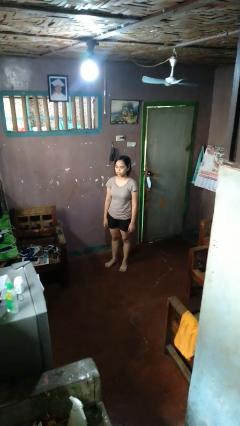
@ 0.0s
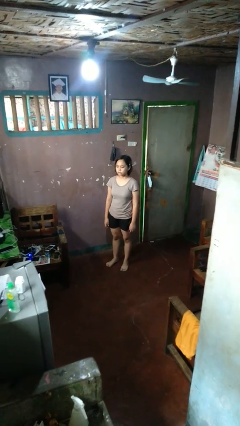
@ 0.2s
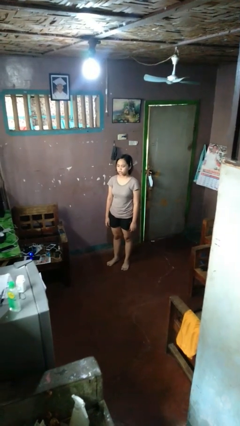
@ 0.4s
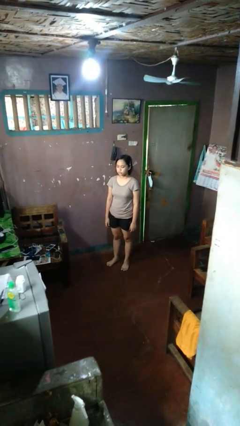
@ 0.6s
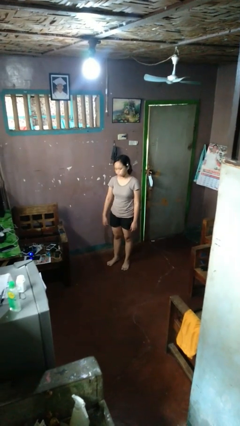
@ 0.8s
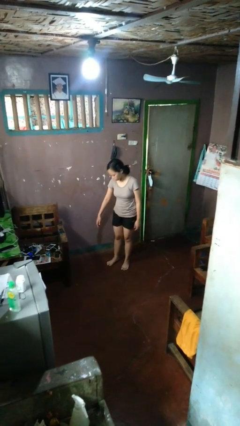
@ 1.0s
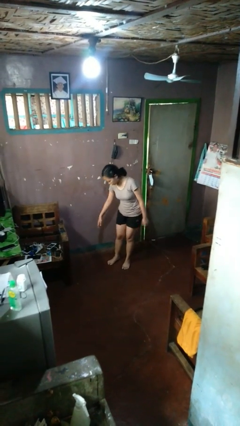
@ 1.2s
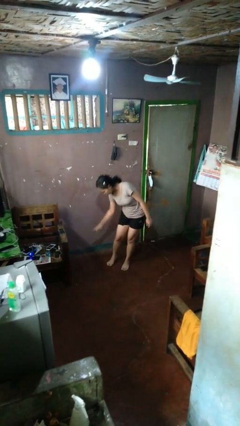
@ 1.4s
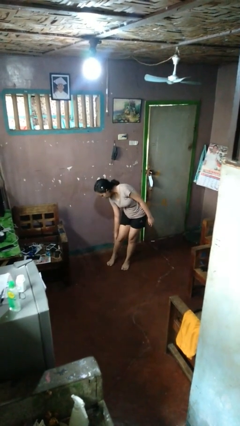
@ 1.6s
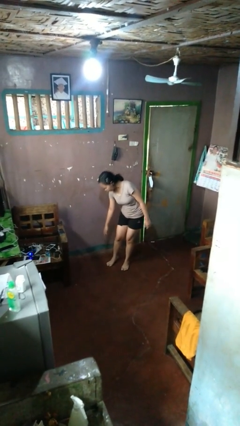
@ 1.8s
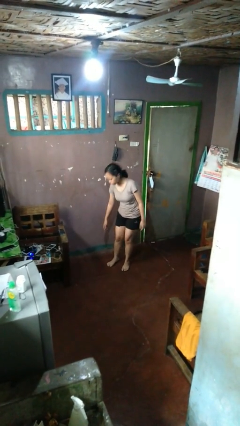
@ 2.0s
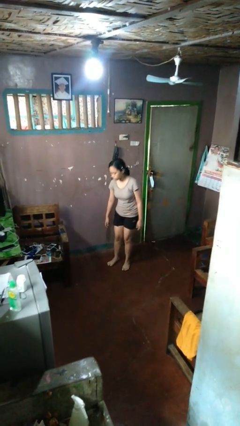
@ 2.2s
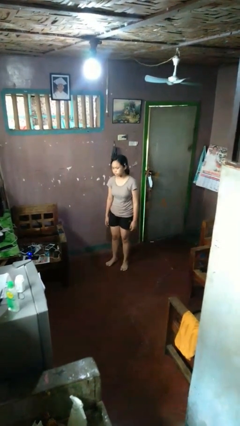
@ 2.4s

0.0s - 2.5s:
person swats bug

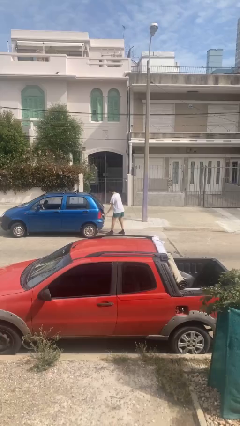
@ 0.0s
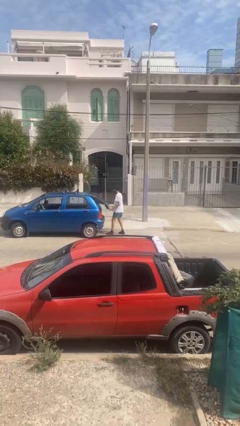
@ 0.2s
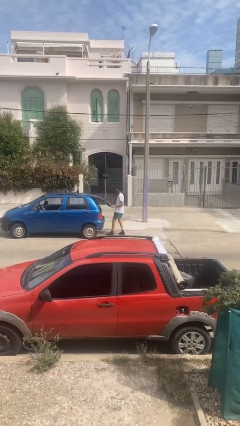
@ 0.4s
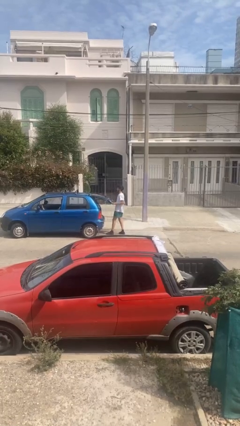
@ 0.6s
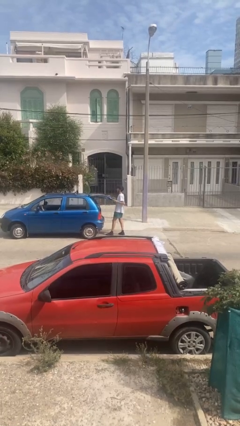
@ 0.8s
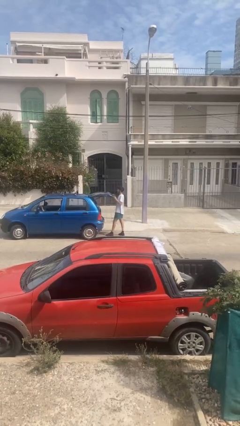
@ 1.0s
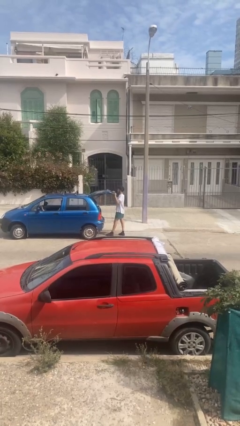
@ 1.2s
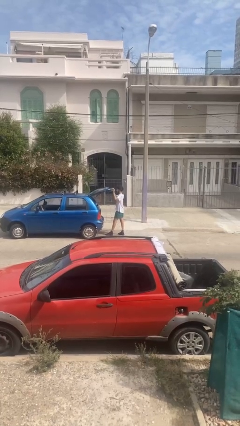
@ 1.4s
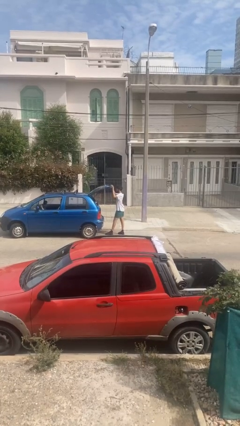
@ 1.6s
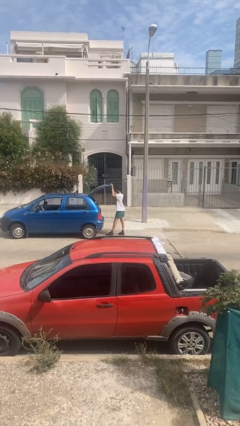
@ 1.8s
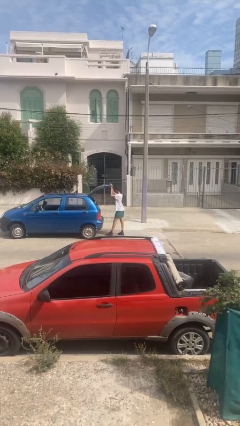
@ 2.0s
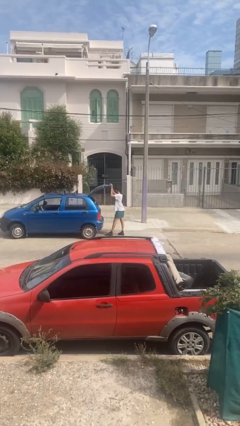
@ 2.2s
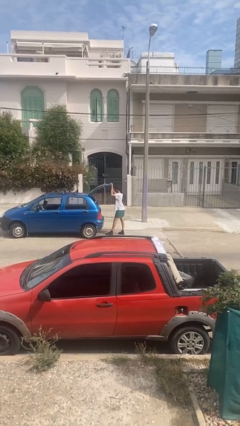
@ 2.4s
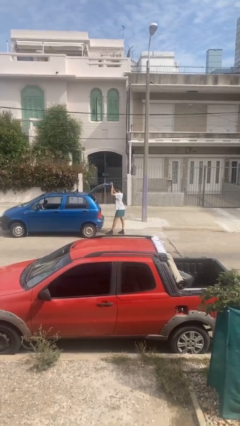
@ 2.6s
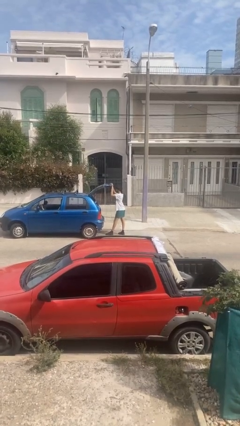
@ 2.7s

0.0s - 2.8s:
person opens car trunk

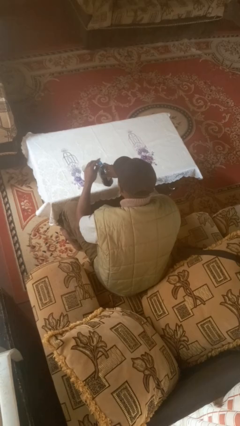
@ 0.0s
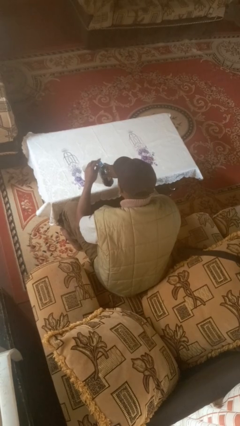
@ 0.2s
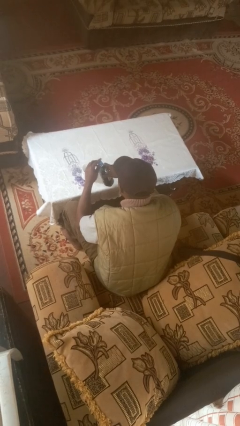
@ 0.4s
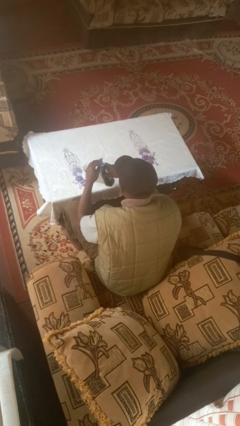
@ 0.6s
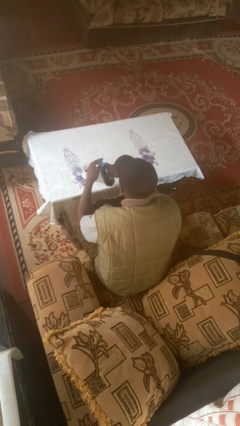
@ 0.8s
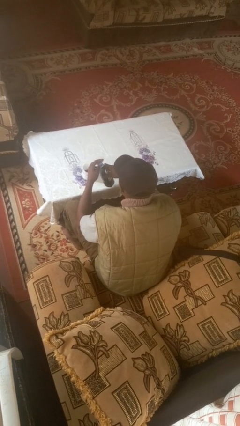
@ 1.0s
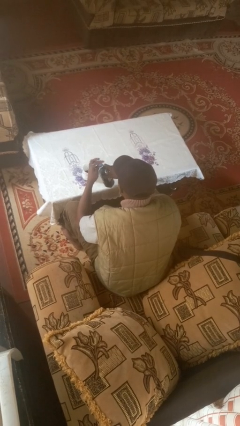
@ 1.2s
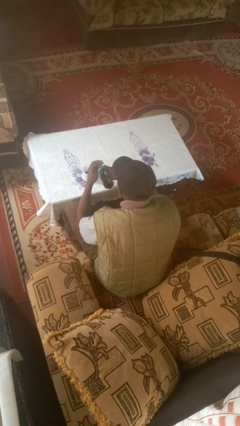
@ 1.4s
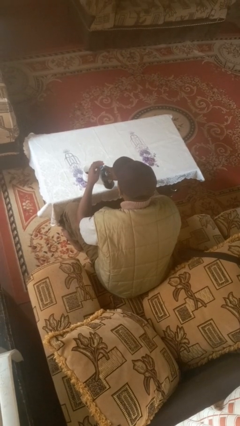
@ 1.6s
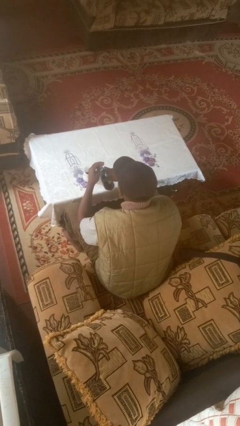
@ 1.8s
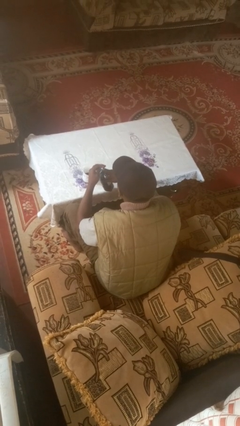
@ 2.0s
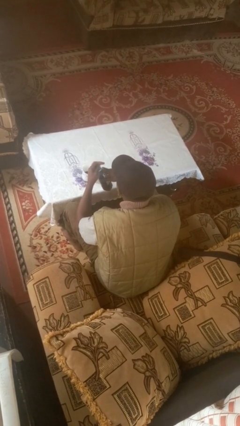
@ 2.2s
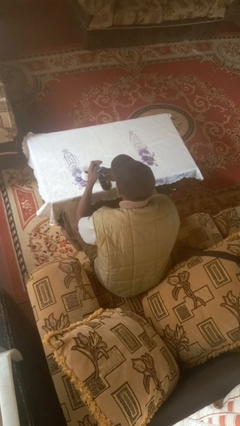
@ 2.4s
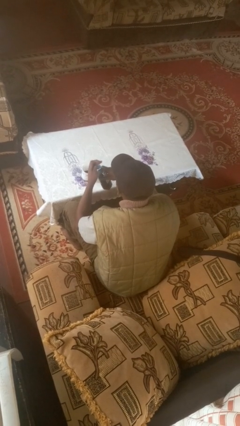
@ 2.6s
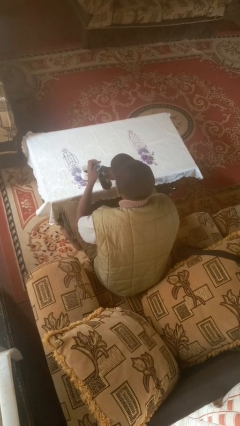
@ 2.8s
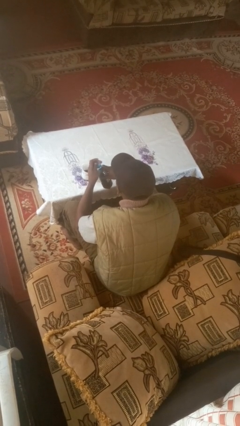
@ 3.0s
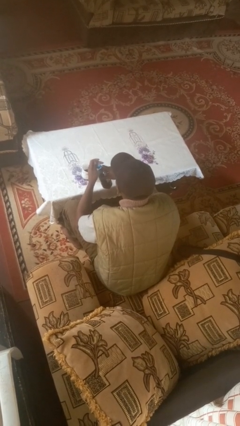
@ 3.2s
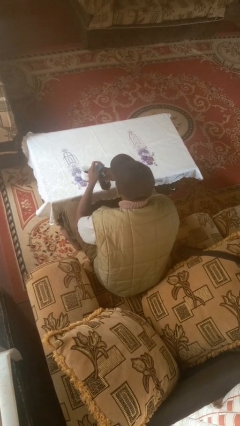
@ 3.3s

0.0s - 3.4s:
person screws lid to bottle

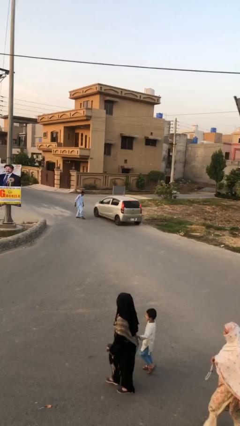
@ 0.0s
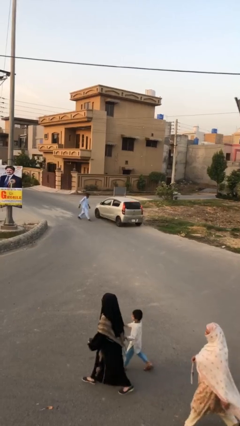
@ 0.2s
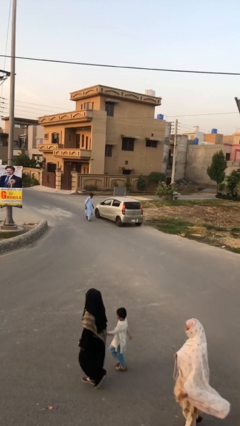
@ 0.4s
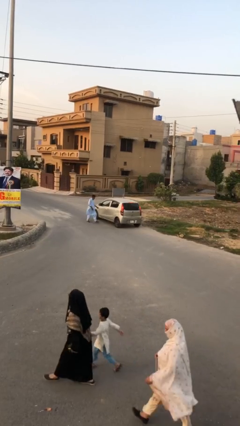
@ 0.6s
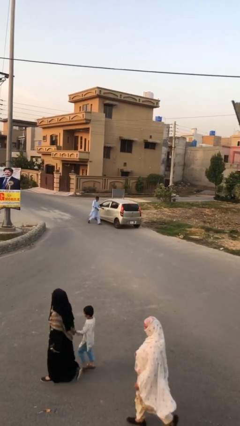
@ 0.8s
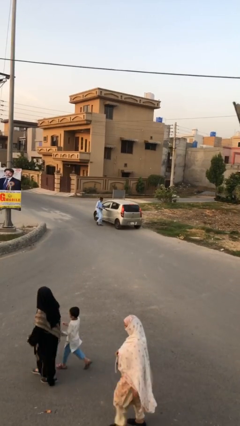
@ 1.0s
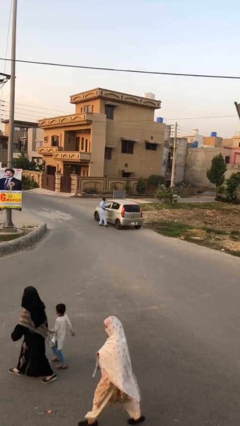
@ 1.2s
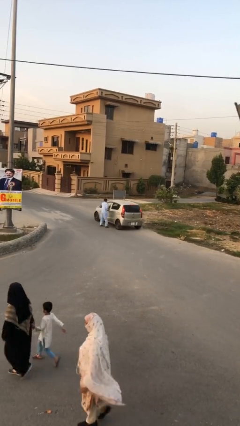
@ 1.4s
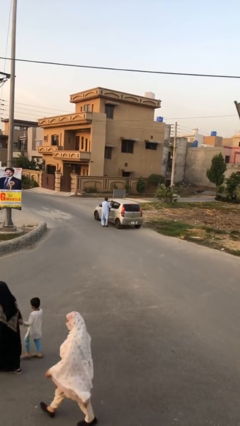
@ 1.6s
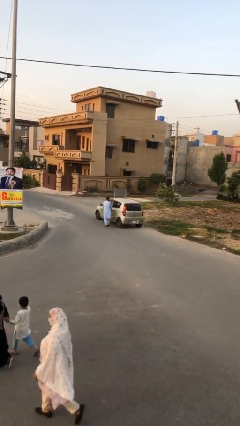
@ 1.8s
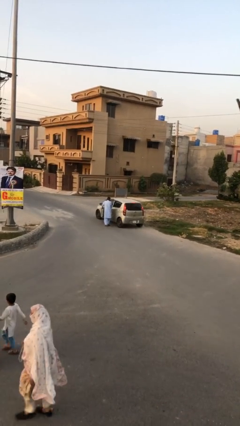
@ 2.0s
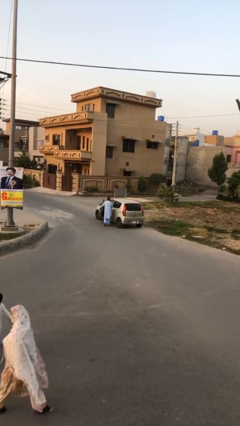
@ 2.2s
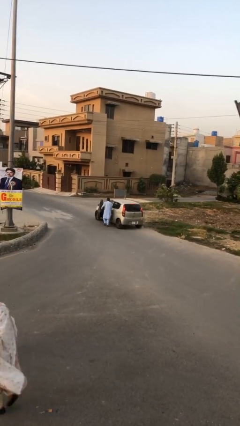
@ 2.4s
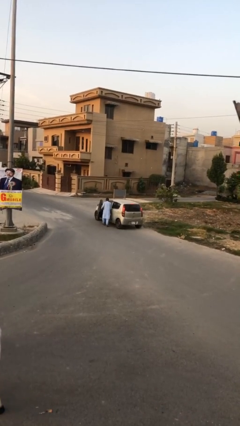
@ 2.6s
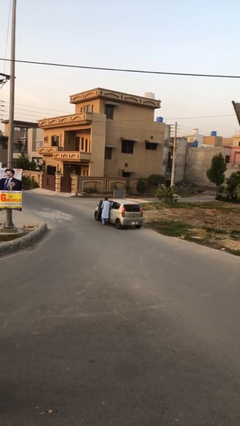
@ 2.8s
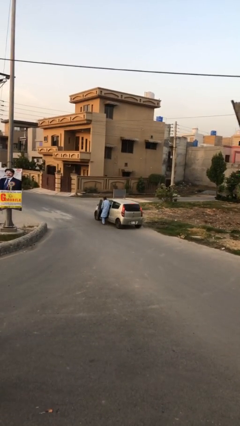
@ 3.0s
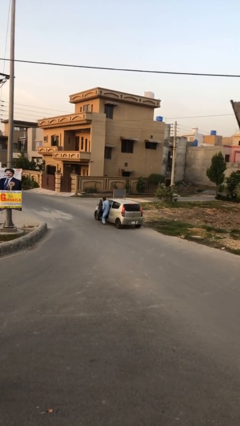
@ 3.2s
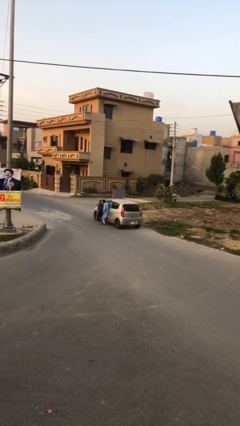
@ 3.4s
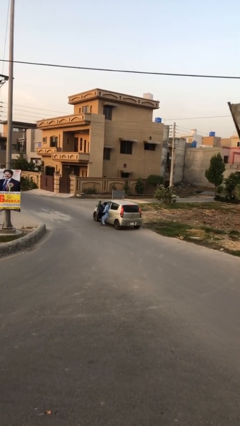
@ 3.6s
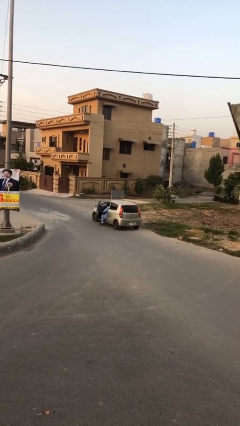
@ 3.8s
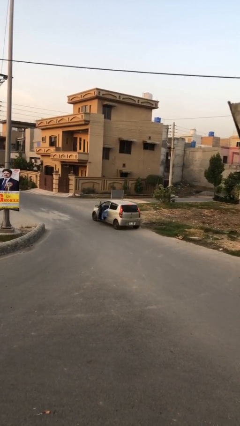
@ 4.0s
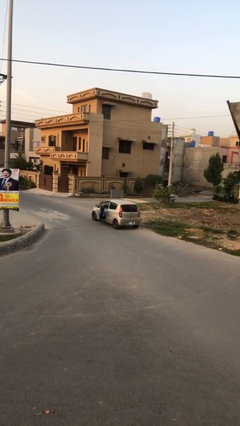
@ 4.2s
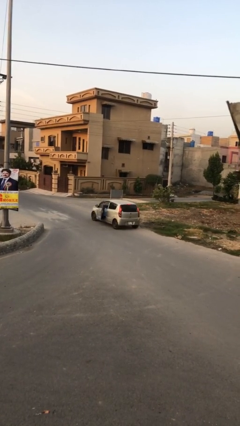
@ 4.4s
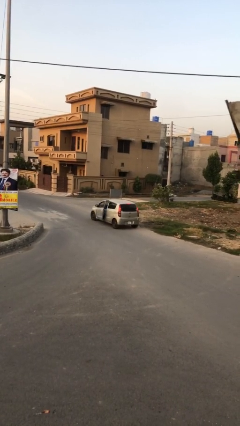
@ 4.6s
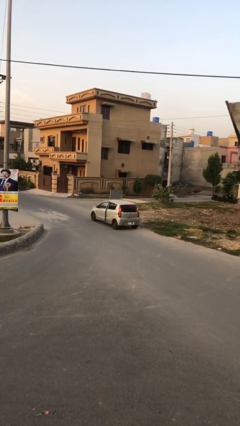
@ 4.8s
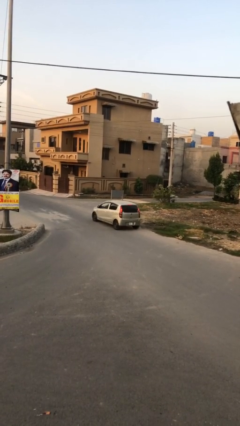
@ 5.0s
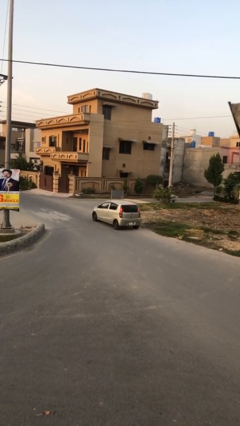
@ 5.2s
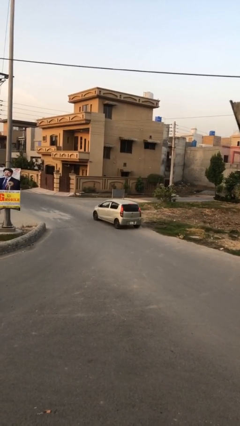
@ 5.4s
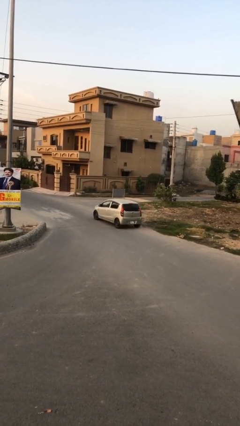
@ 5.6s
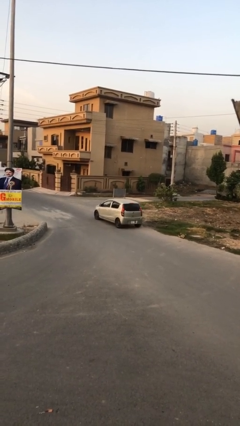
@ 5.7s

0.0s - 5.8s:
car picks up person

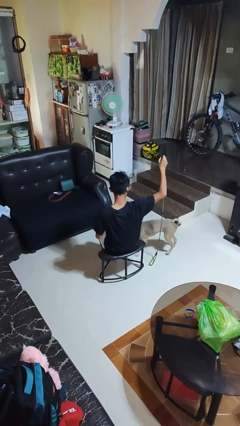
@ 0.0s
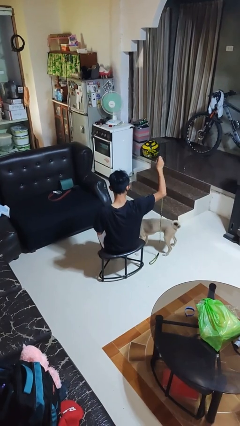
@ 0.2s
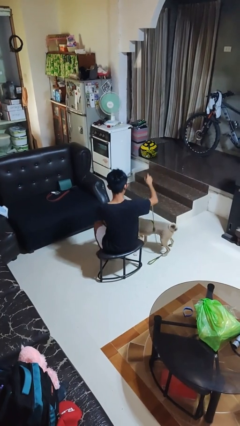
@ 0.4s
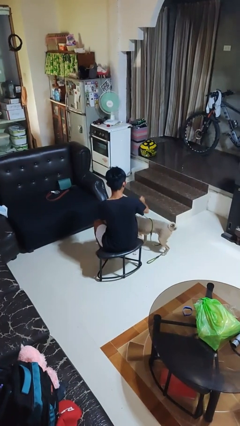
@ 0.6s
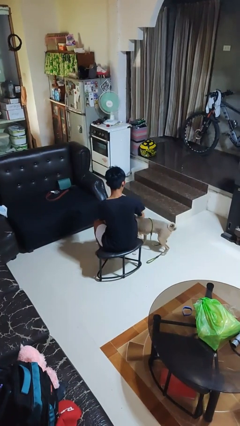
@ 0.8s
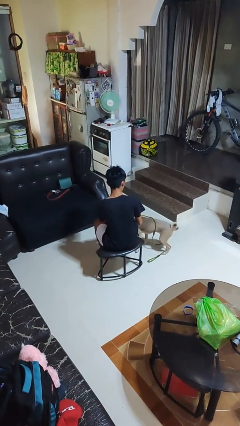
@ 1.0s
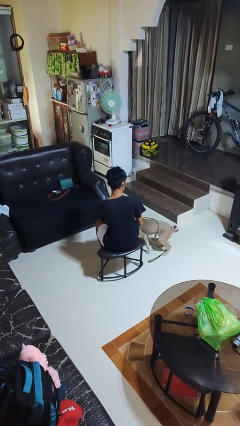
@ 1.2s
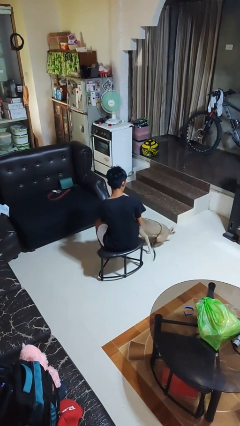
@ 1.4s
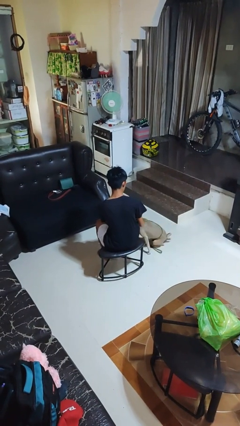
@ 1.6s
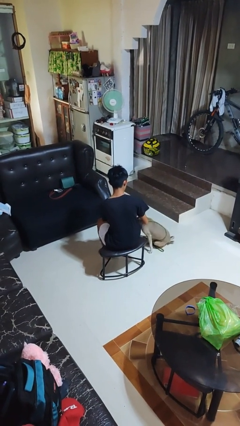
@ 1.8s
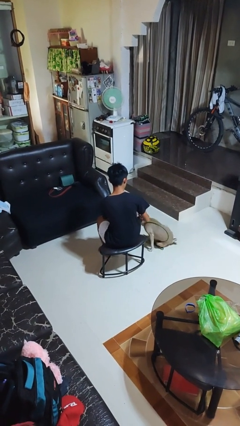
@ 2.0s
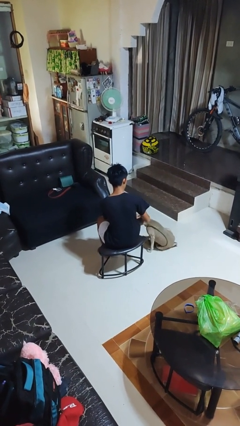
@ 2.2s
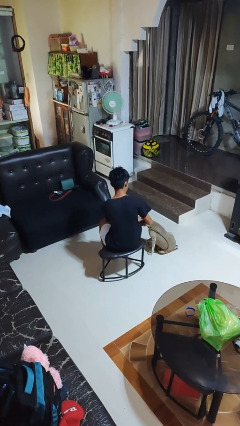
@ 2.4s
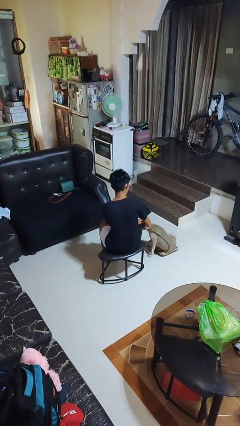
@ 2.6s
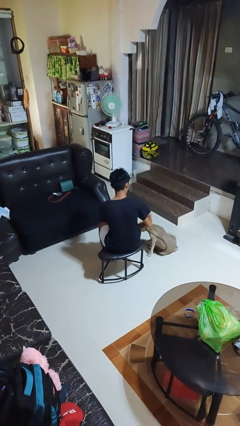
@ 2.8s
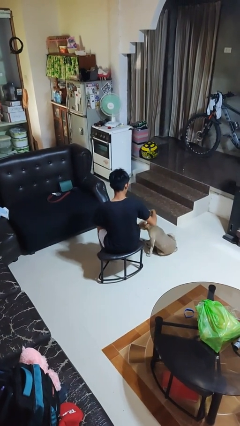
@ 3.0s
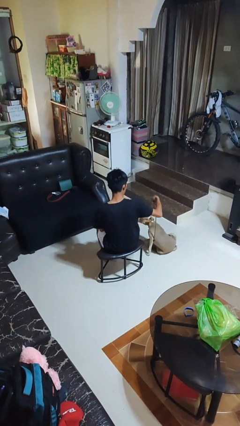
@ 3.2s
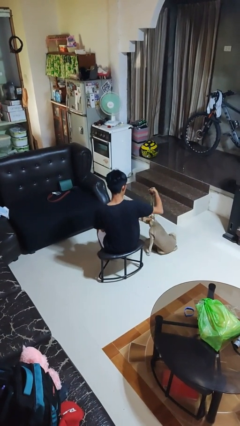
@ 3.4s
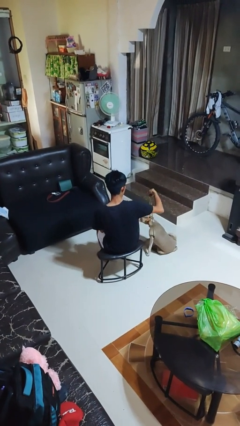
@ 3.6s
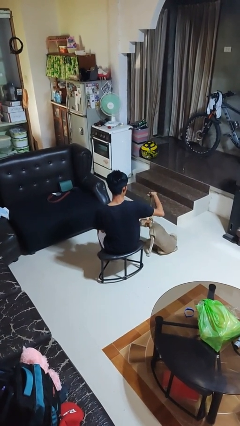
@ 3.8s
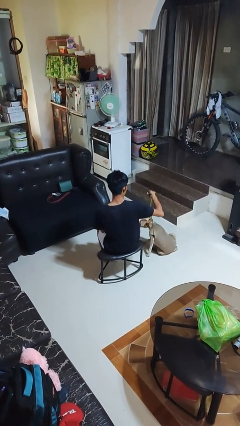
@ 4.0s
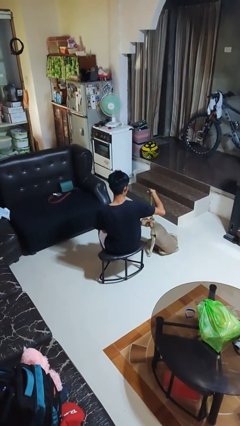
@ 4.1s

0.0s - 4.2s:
person attaches leash to dog
